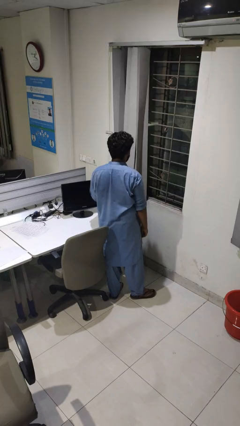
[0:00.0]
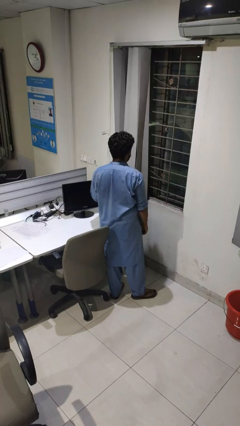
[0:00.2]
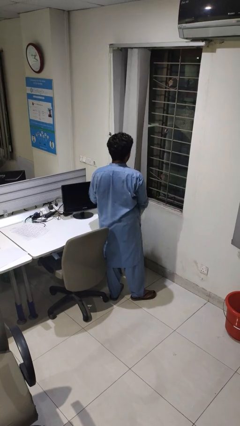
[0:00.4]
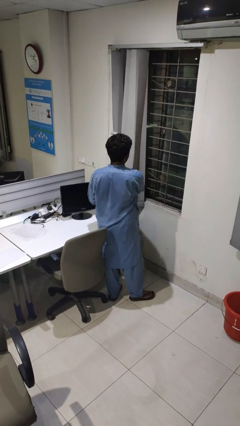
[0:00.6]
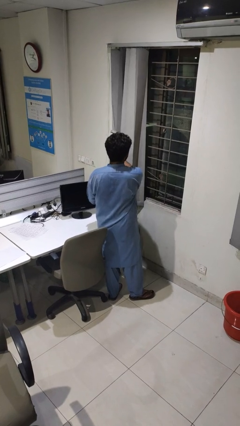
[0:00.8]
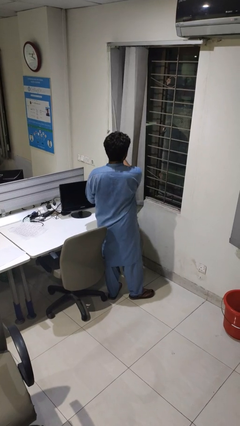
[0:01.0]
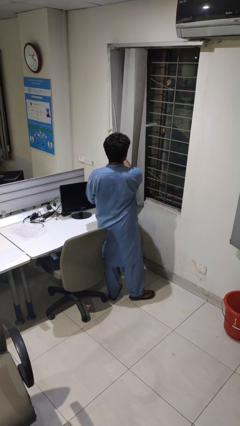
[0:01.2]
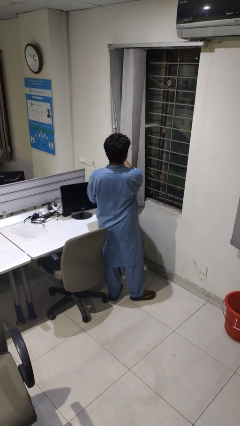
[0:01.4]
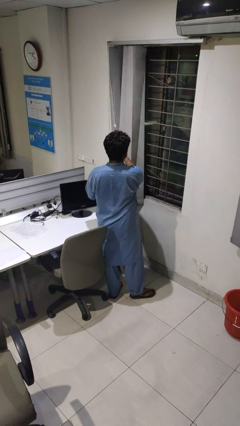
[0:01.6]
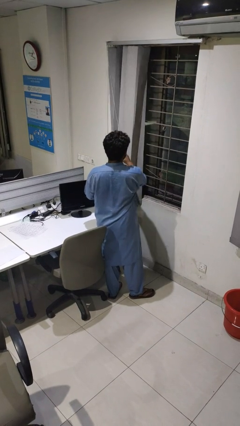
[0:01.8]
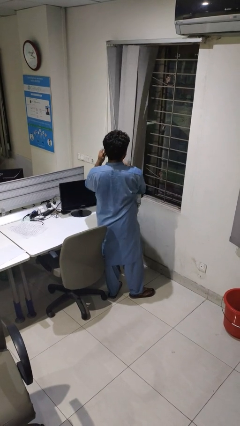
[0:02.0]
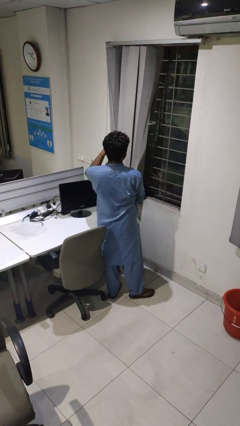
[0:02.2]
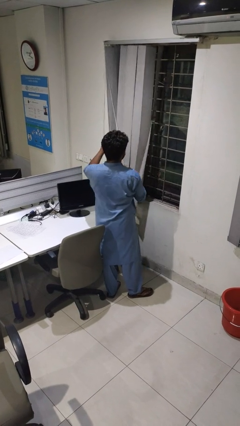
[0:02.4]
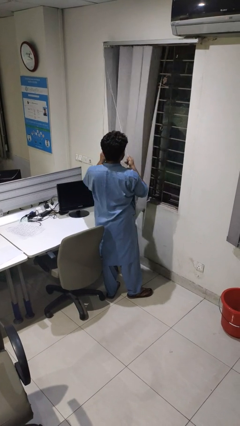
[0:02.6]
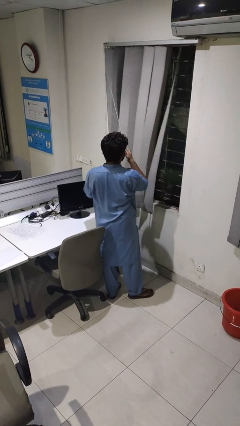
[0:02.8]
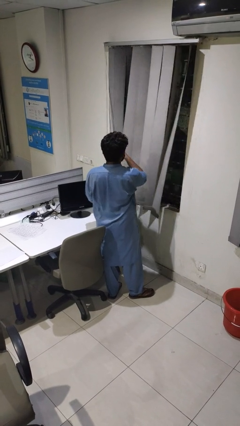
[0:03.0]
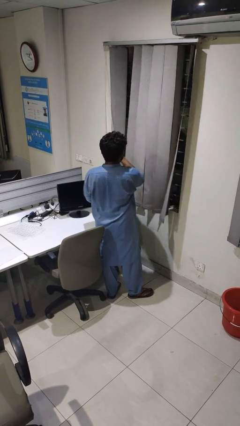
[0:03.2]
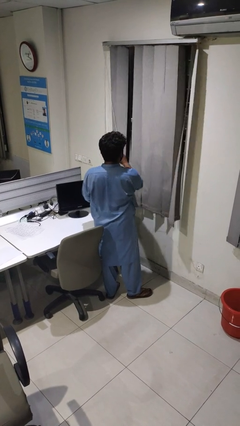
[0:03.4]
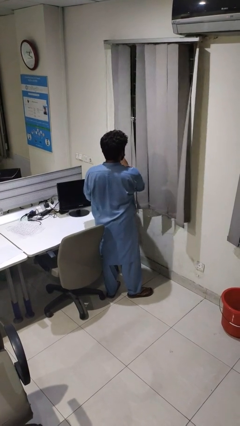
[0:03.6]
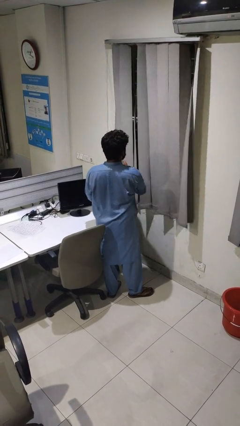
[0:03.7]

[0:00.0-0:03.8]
person closes curtains

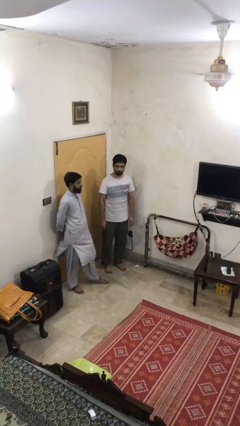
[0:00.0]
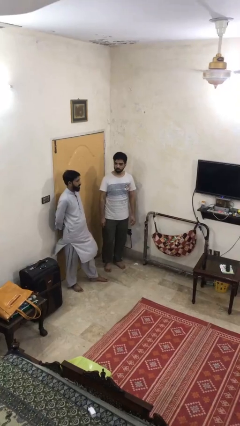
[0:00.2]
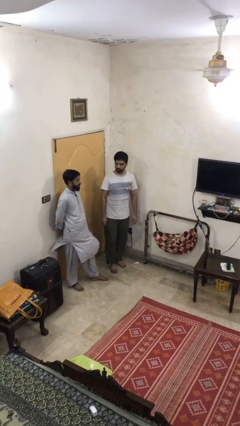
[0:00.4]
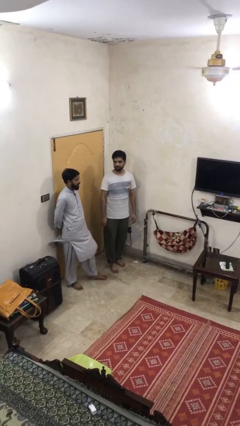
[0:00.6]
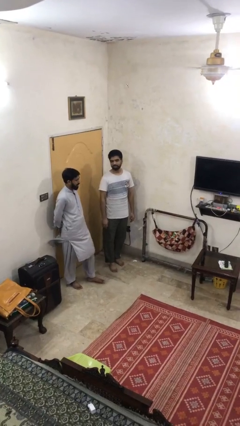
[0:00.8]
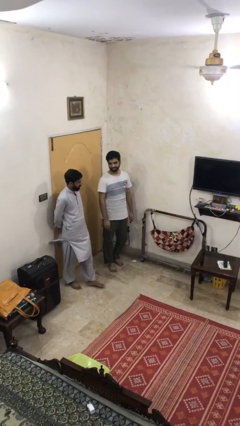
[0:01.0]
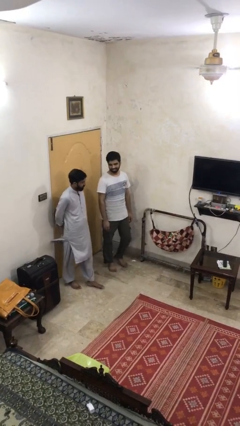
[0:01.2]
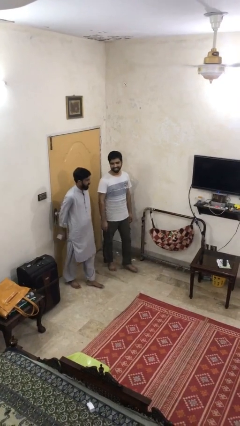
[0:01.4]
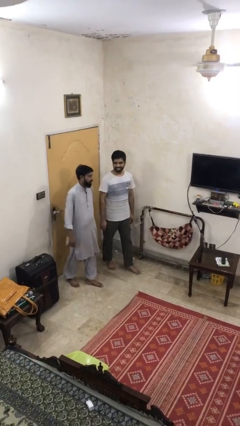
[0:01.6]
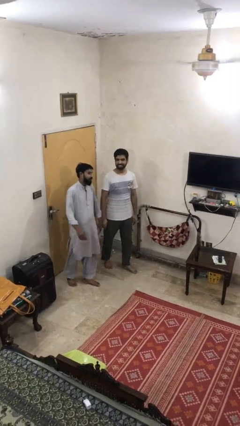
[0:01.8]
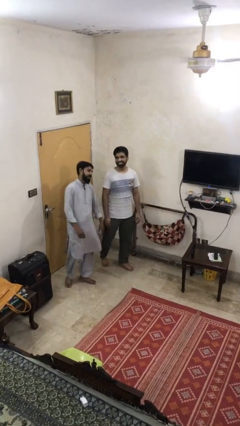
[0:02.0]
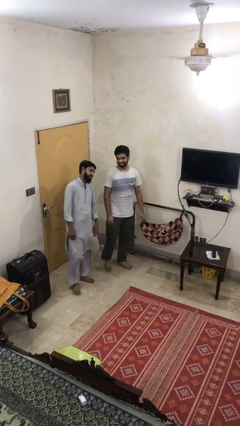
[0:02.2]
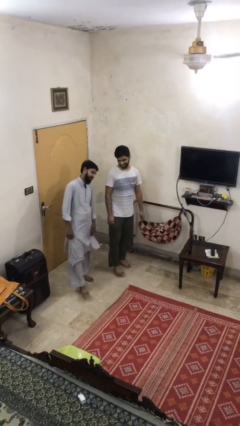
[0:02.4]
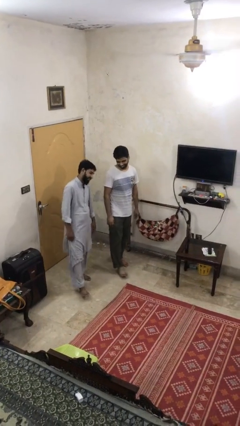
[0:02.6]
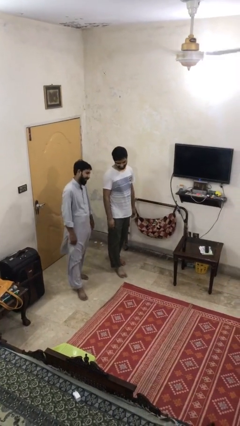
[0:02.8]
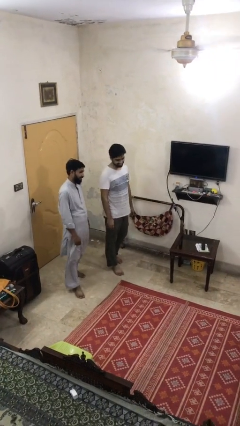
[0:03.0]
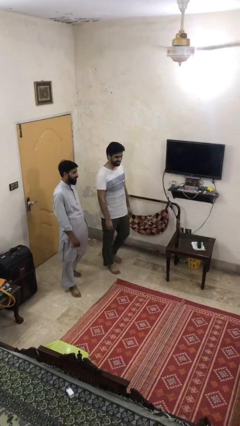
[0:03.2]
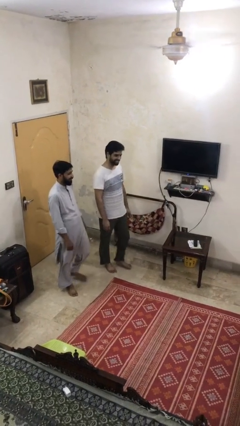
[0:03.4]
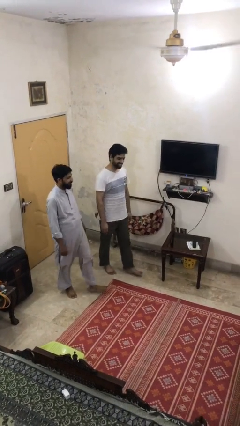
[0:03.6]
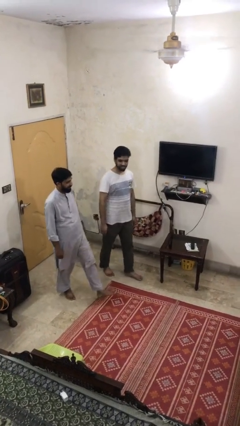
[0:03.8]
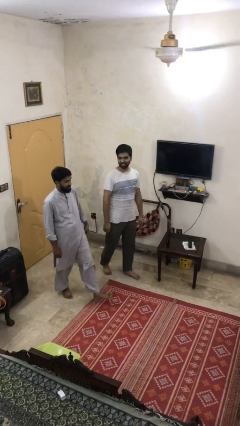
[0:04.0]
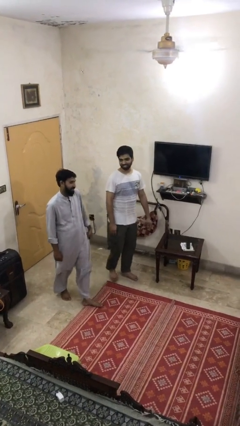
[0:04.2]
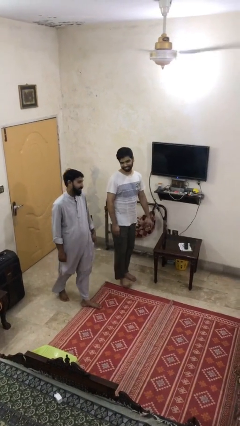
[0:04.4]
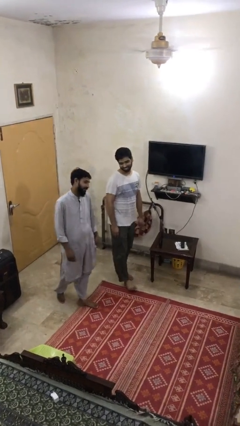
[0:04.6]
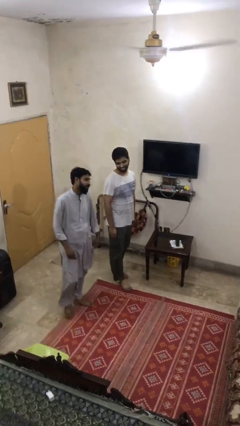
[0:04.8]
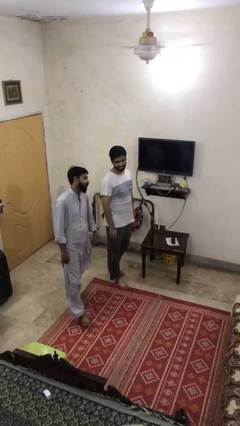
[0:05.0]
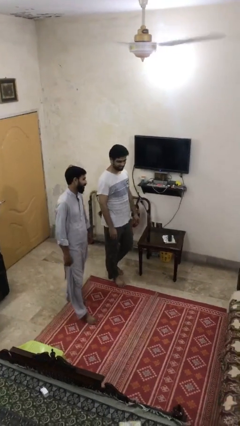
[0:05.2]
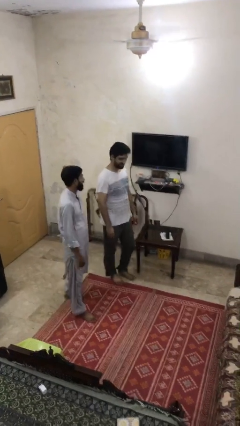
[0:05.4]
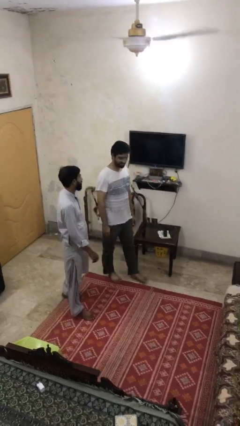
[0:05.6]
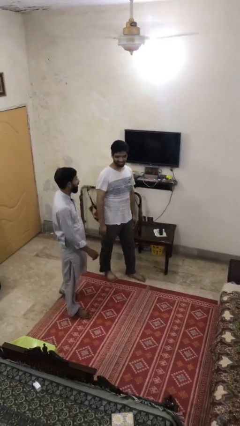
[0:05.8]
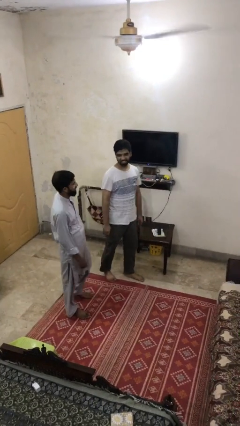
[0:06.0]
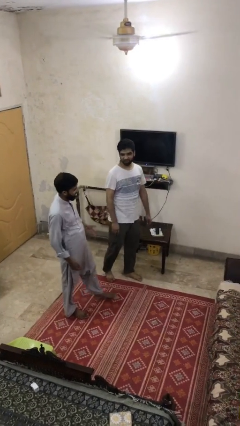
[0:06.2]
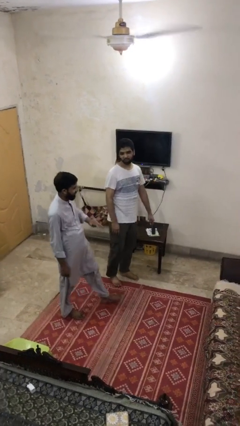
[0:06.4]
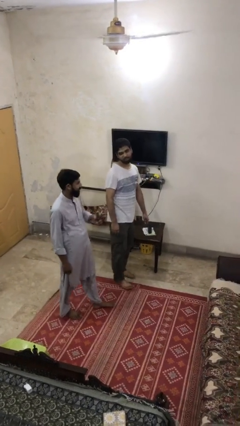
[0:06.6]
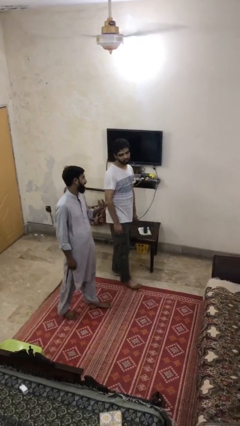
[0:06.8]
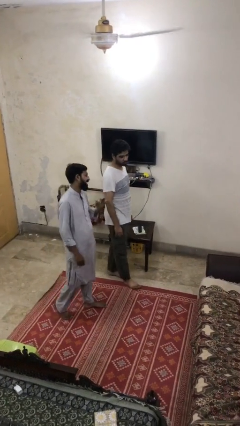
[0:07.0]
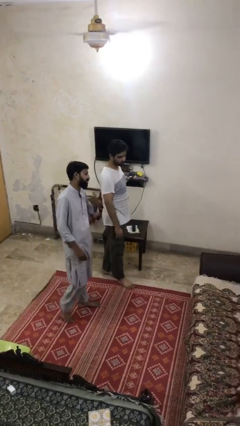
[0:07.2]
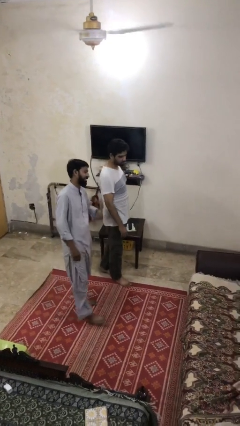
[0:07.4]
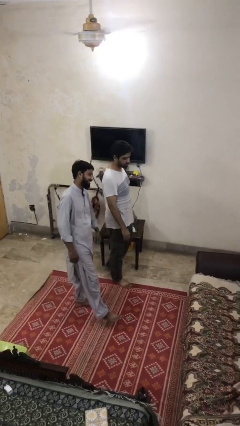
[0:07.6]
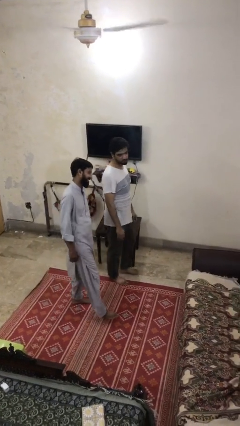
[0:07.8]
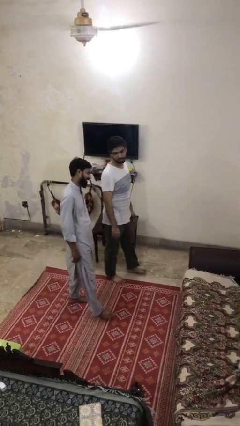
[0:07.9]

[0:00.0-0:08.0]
person talks to person

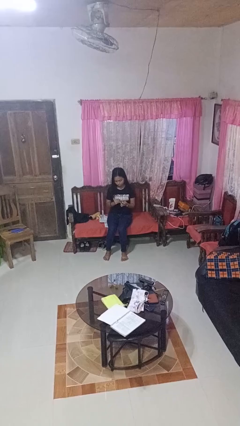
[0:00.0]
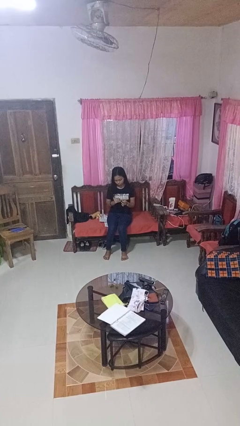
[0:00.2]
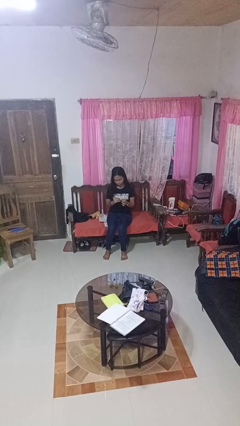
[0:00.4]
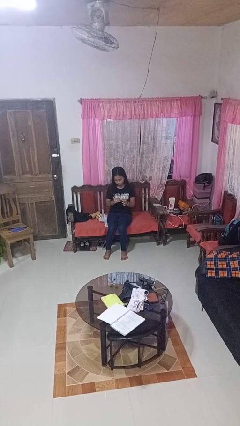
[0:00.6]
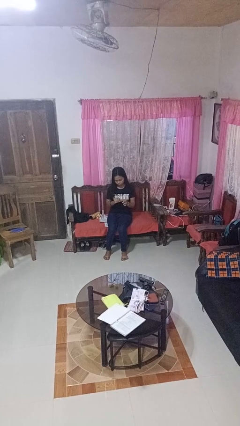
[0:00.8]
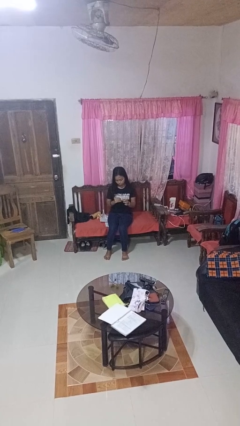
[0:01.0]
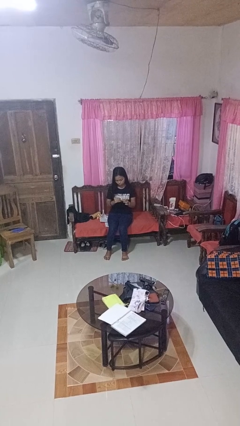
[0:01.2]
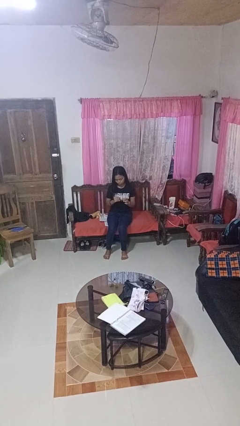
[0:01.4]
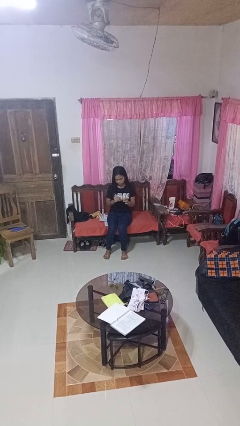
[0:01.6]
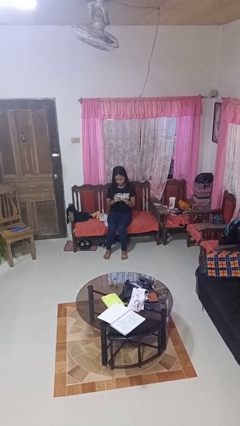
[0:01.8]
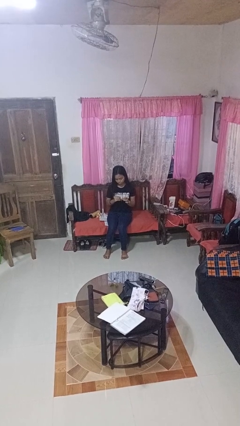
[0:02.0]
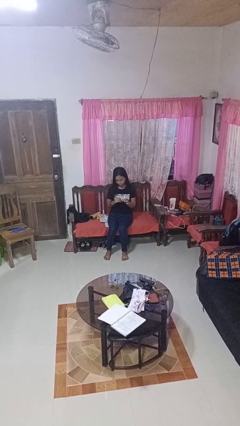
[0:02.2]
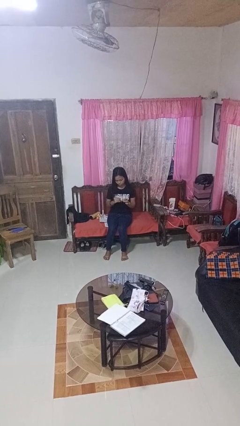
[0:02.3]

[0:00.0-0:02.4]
person clips fingernails

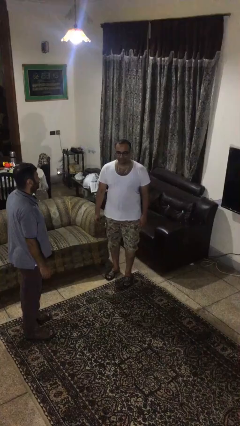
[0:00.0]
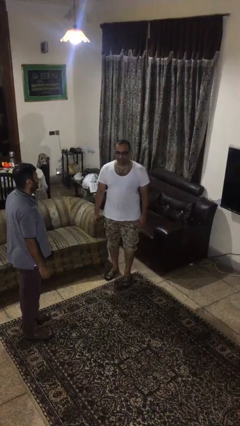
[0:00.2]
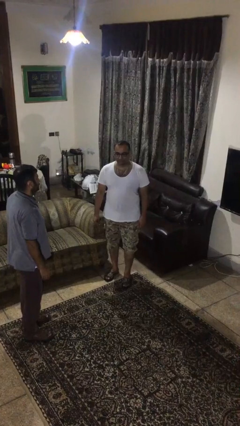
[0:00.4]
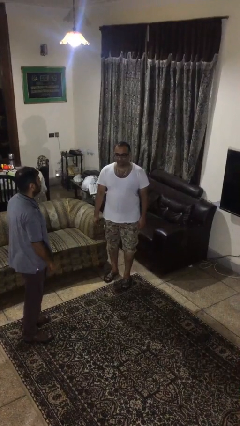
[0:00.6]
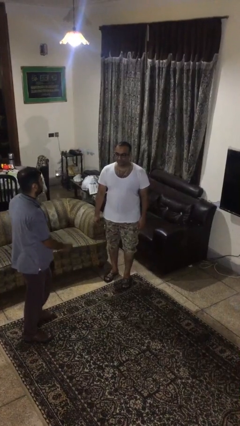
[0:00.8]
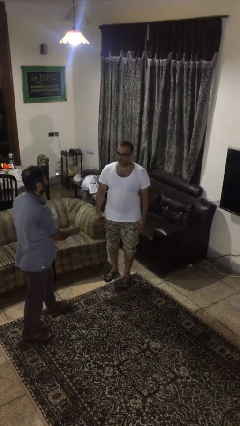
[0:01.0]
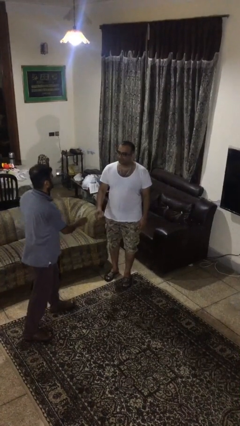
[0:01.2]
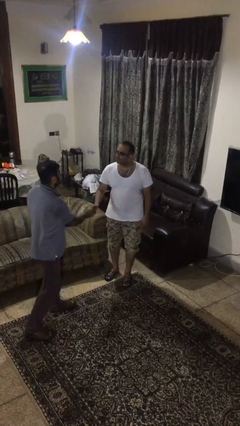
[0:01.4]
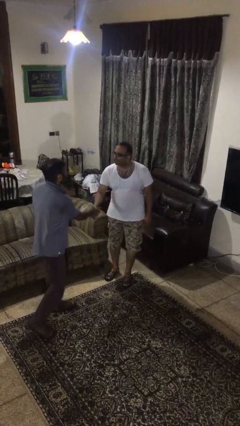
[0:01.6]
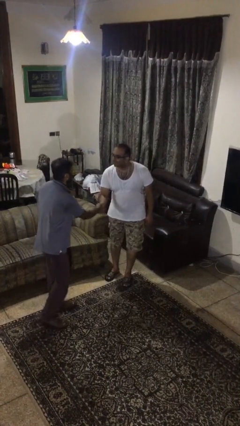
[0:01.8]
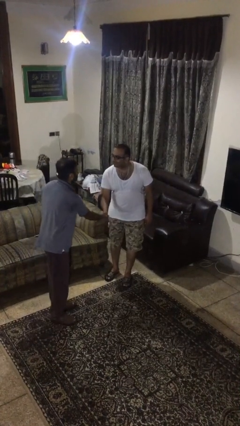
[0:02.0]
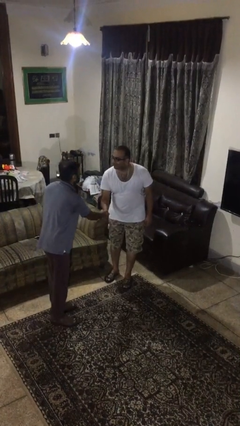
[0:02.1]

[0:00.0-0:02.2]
person shakes hand

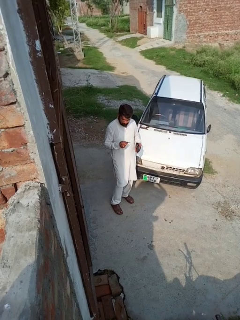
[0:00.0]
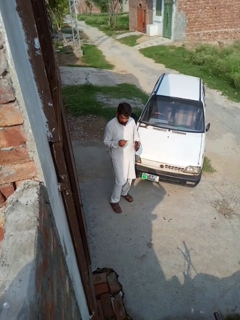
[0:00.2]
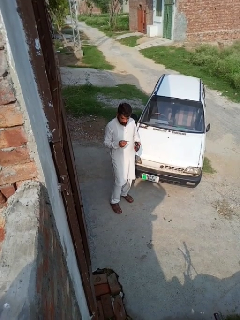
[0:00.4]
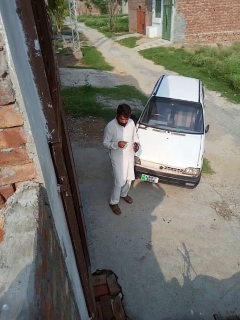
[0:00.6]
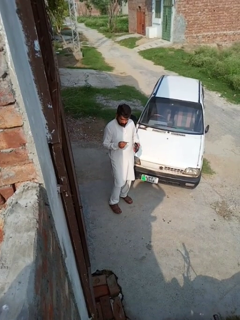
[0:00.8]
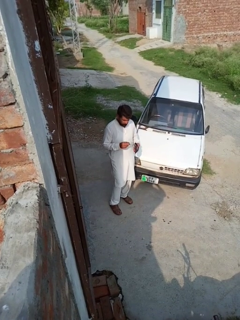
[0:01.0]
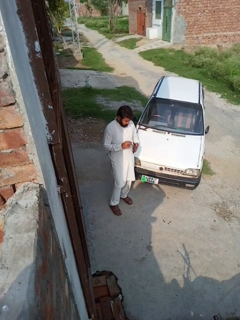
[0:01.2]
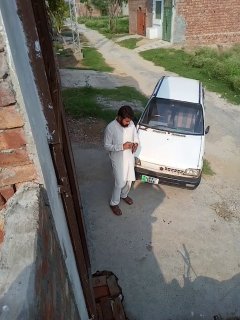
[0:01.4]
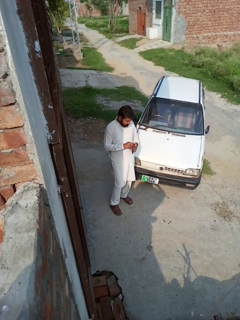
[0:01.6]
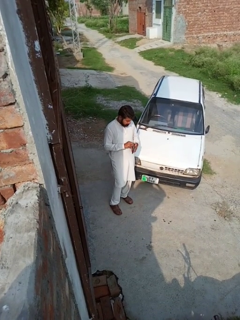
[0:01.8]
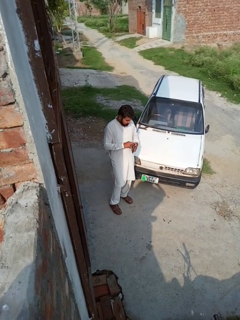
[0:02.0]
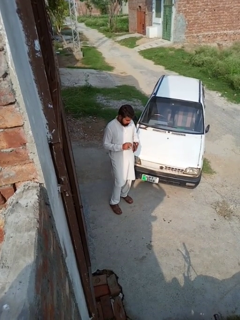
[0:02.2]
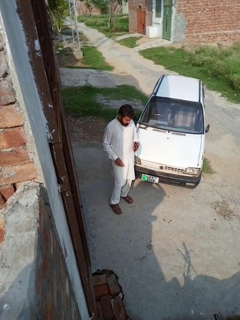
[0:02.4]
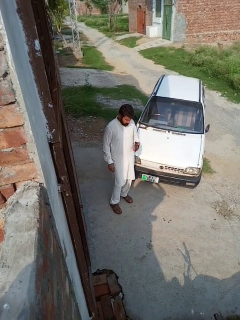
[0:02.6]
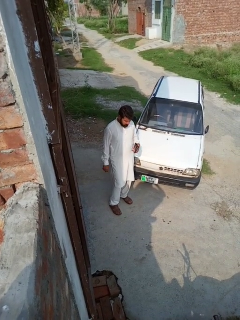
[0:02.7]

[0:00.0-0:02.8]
person puts object into purse
